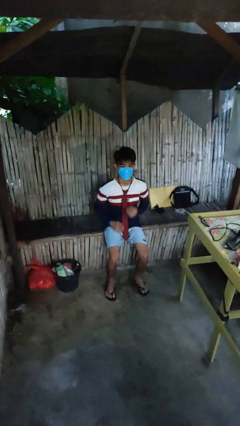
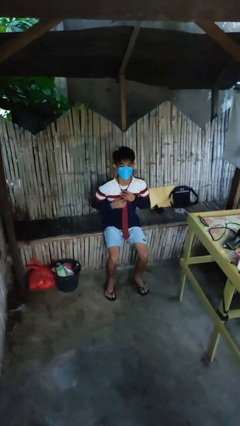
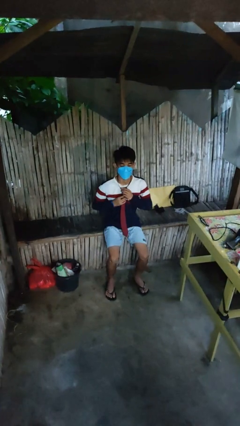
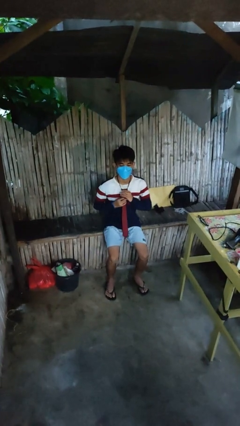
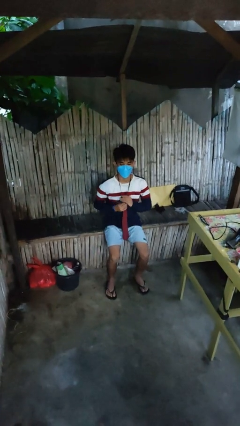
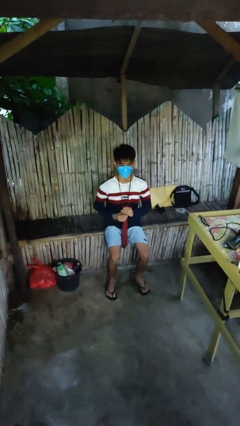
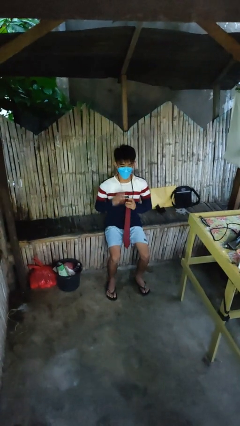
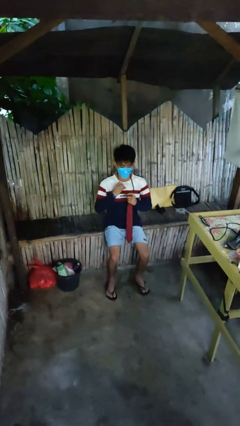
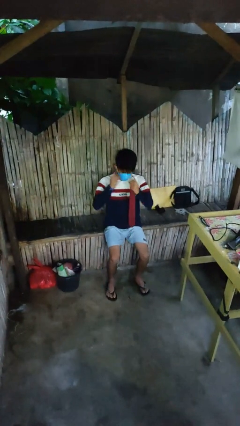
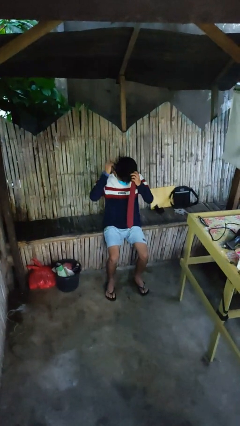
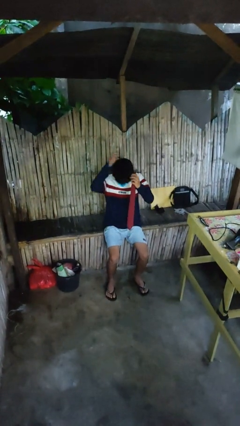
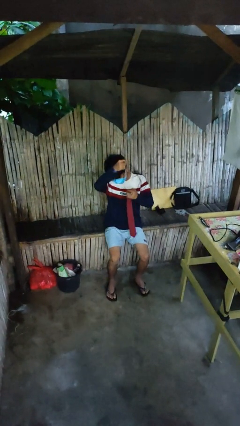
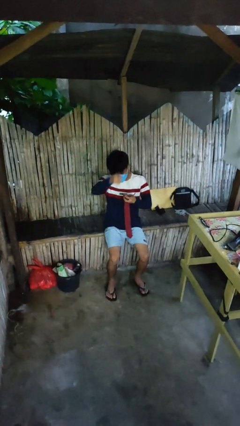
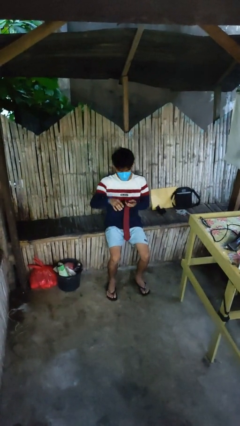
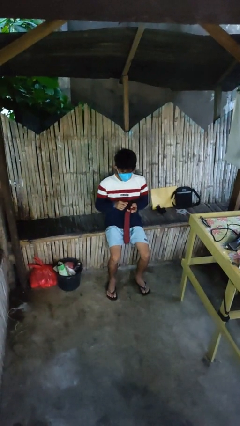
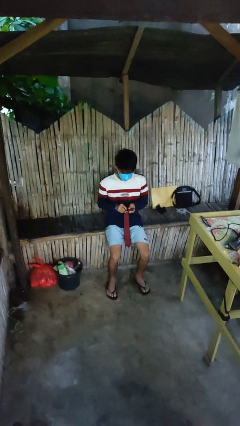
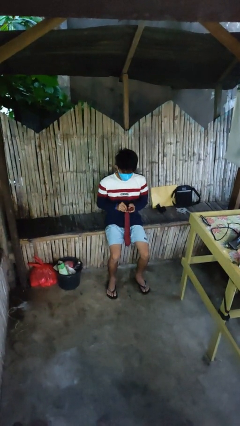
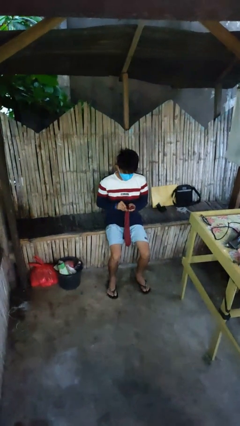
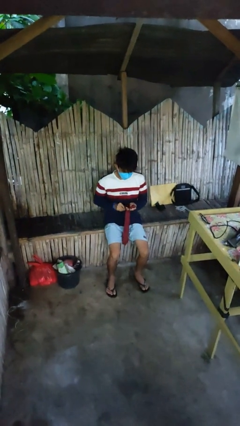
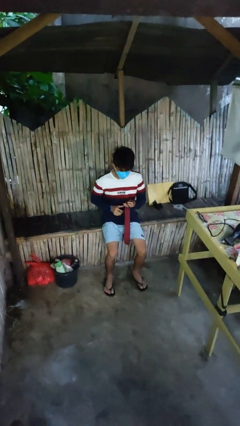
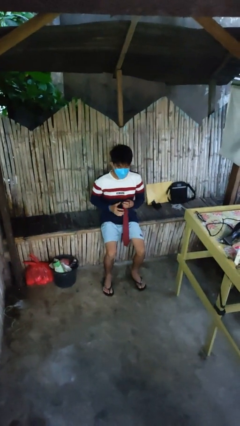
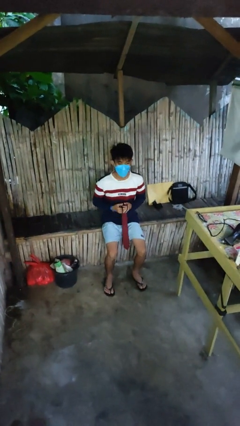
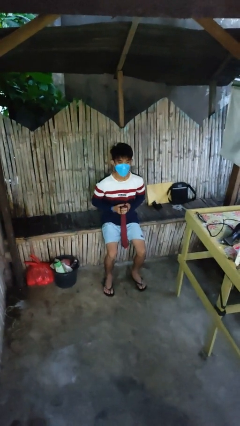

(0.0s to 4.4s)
person takes off necktie

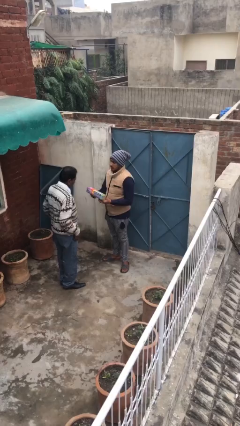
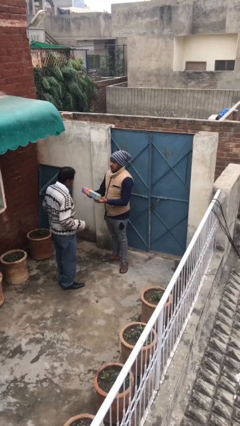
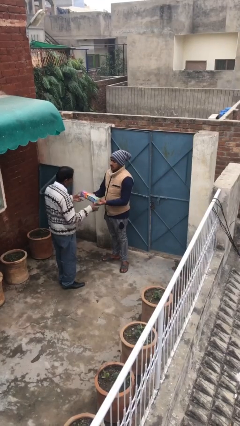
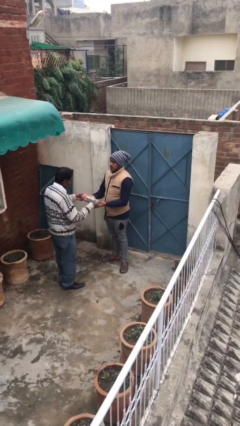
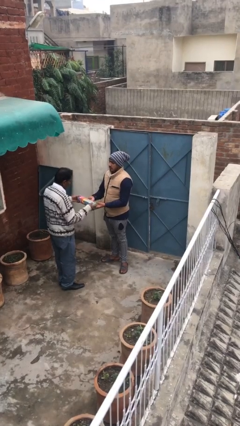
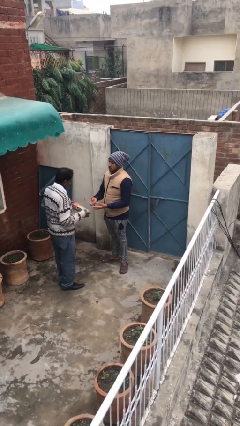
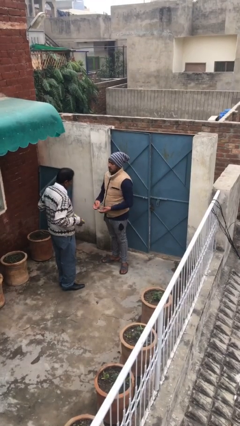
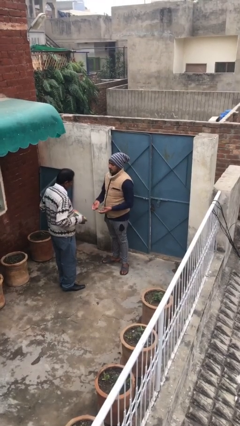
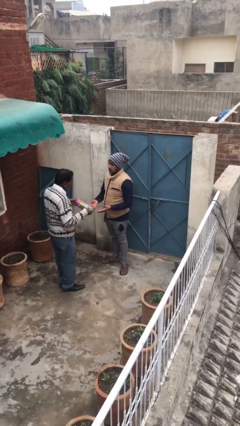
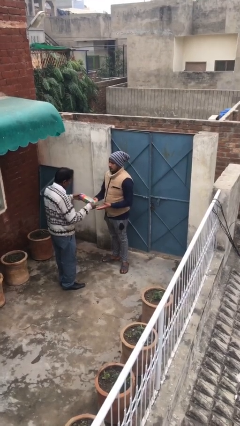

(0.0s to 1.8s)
person transfers object to person

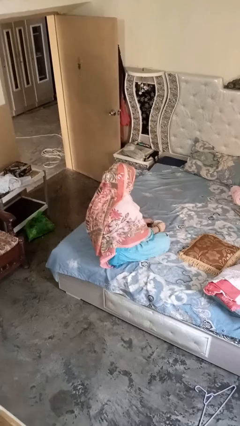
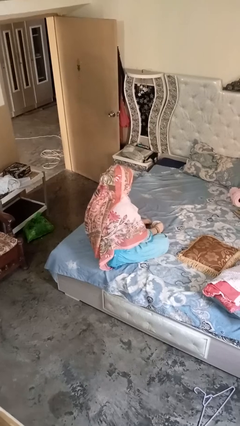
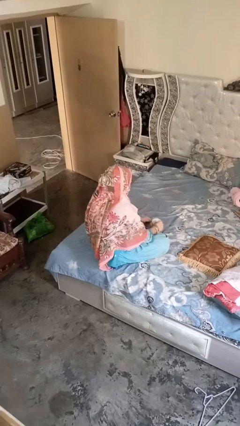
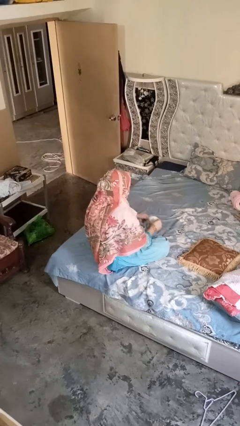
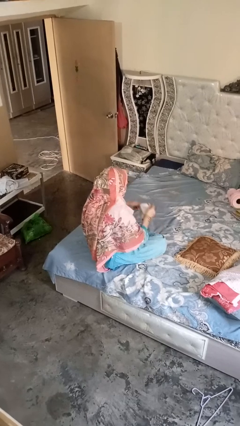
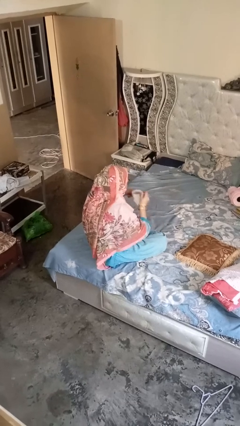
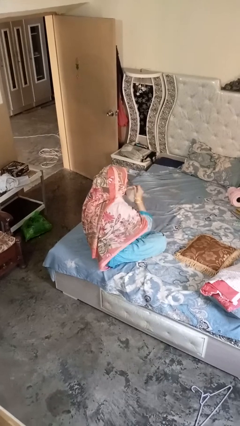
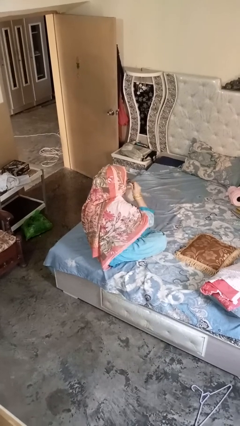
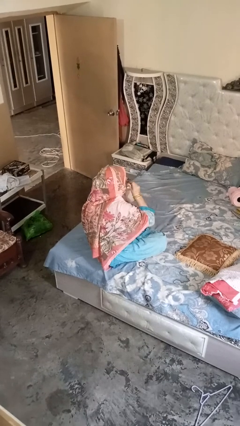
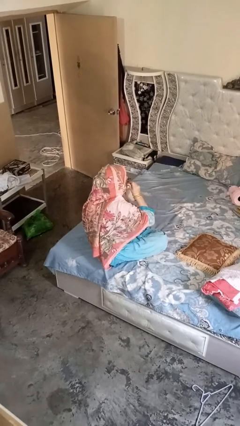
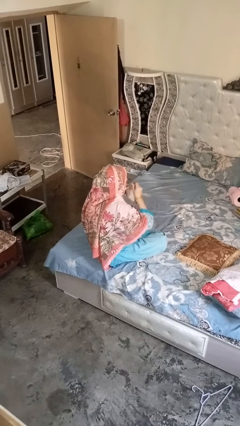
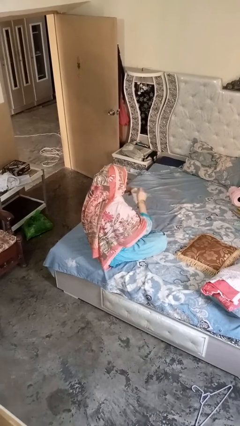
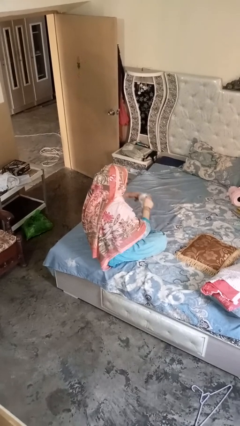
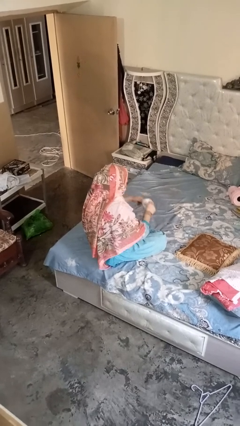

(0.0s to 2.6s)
person drinks from mug

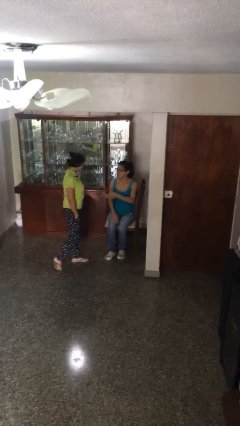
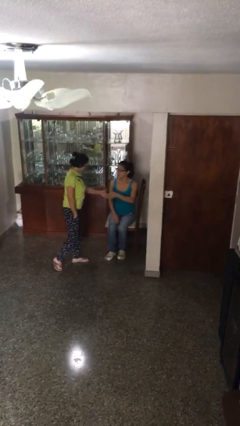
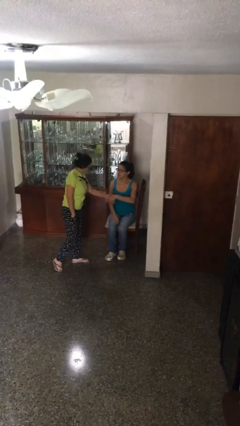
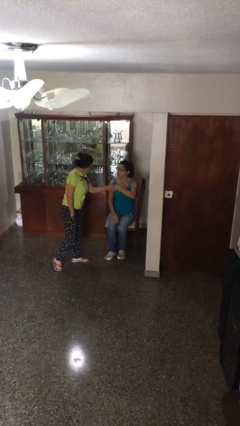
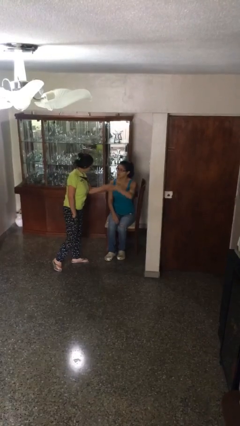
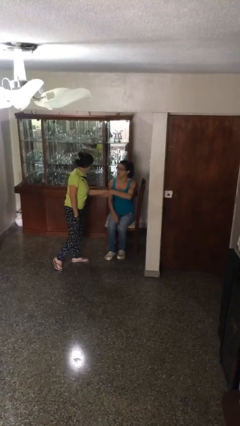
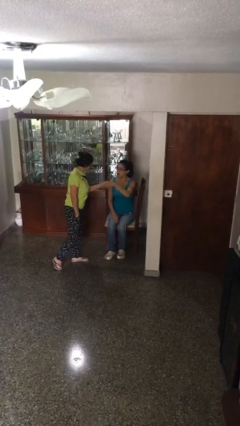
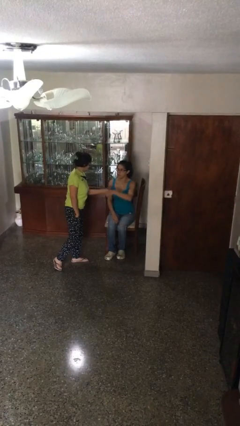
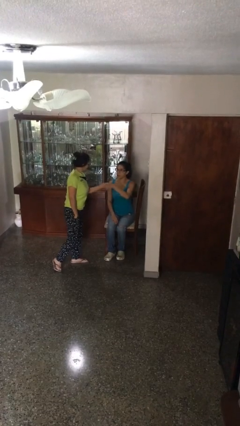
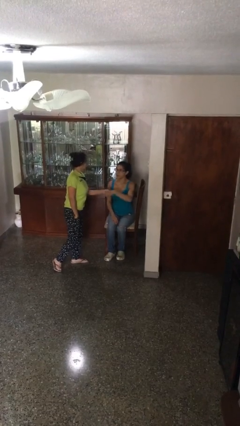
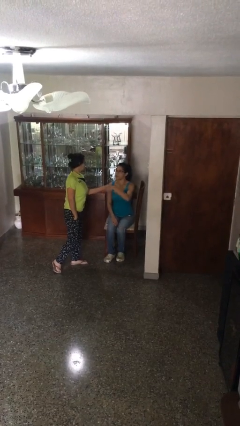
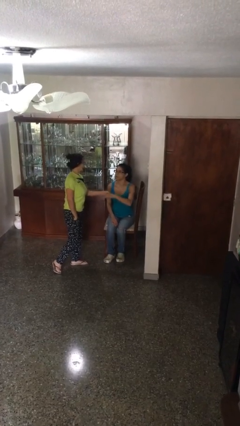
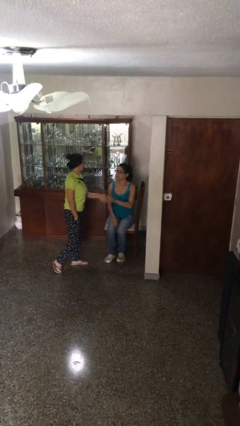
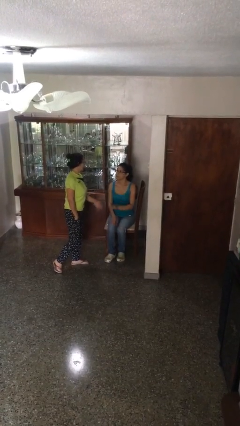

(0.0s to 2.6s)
person shakes hand

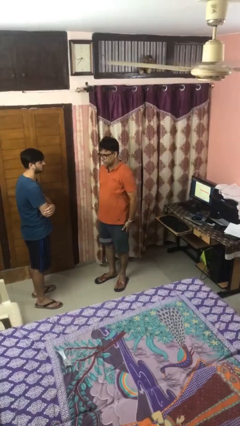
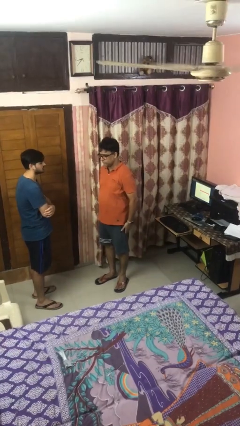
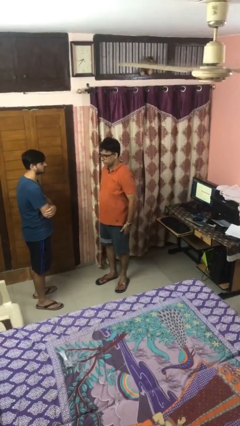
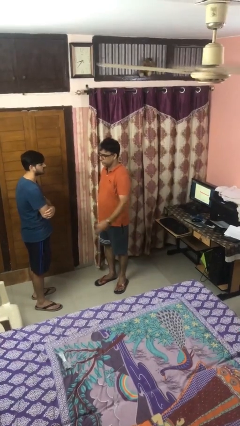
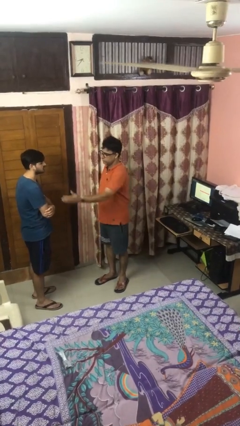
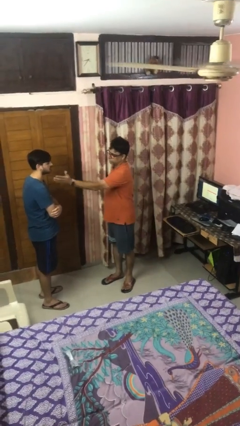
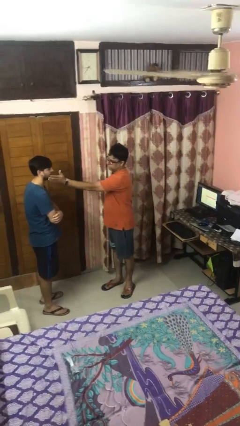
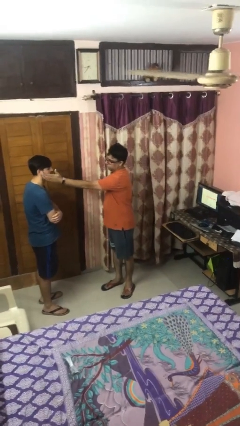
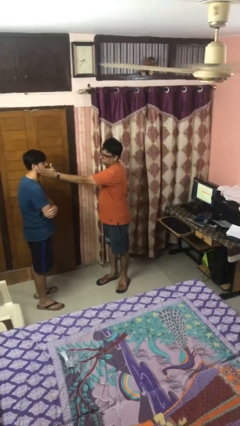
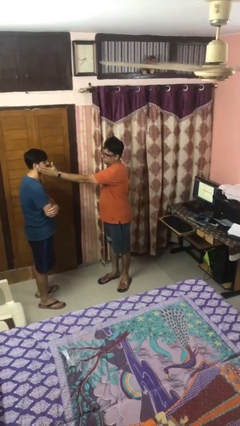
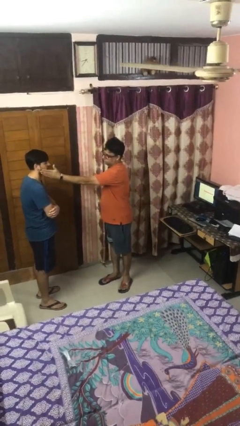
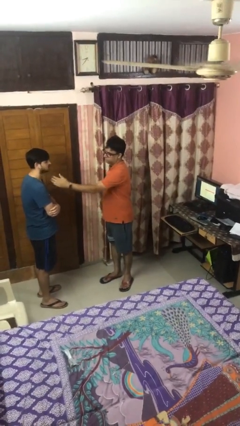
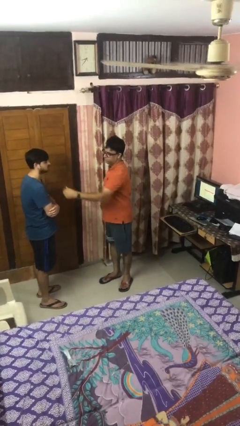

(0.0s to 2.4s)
person touches face of person

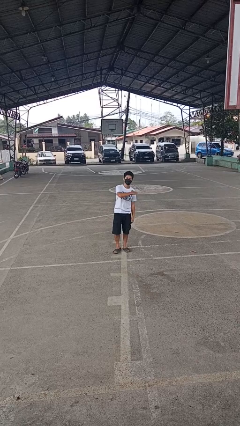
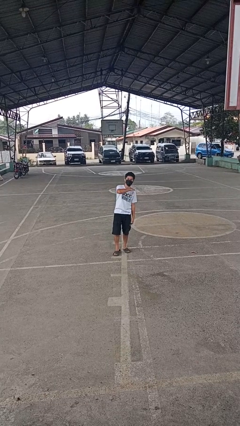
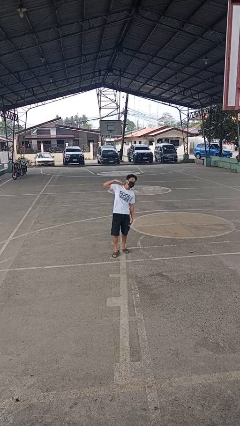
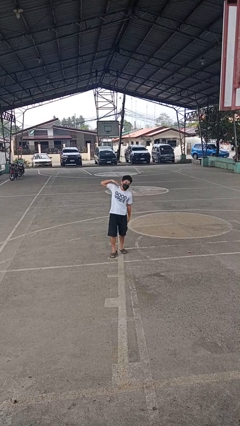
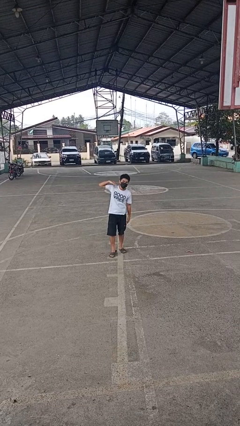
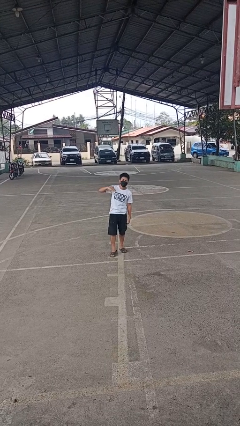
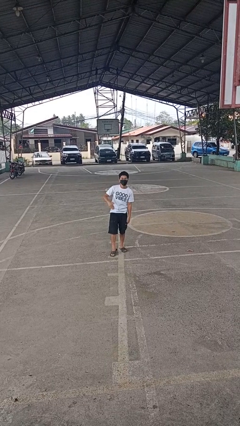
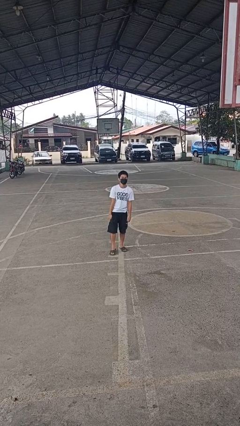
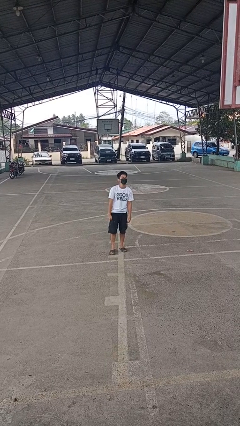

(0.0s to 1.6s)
person gestures cut

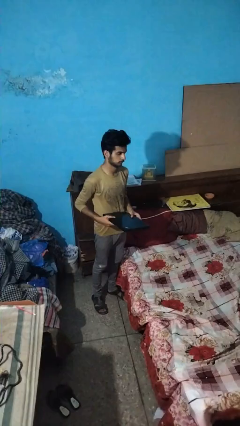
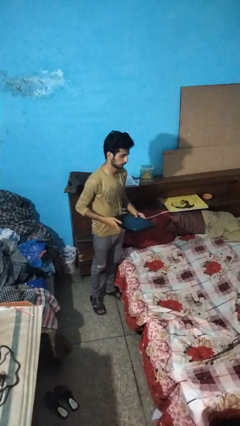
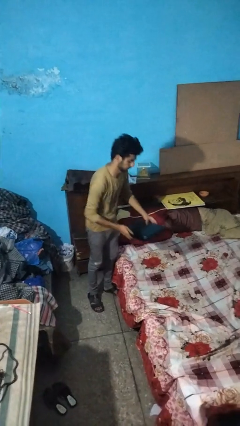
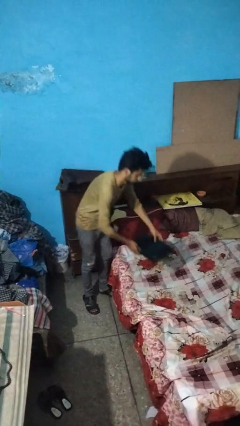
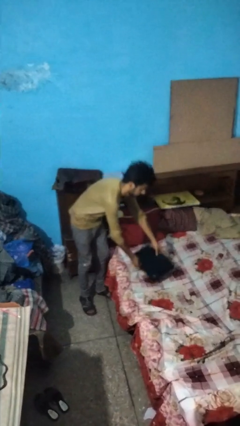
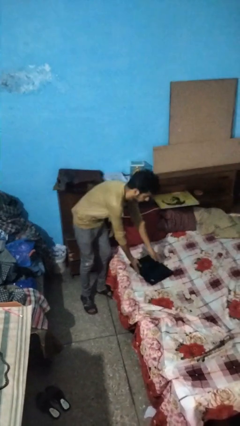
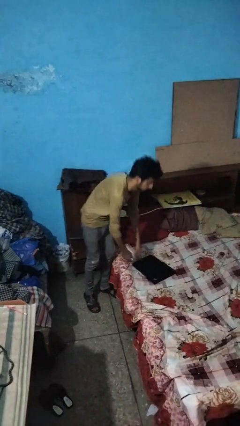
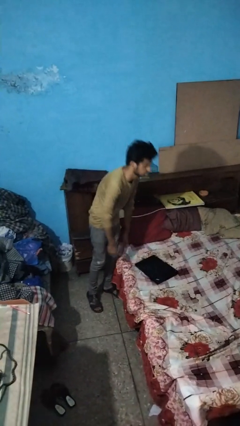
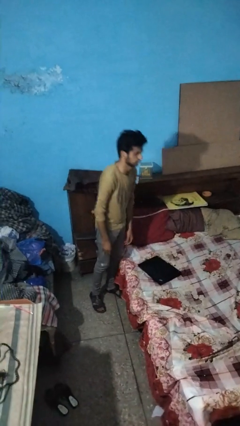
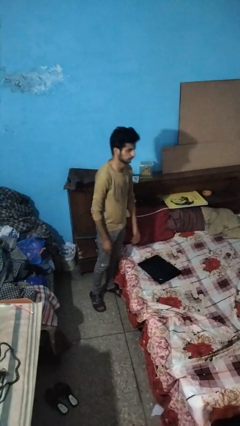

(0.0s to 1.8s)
person puts down object on bed
